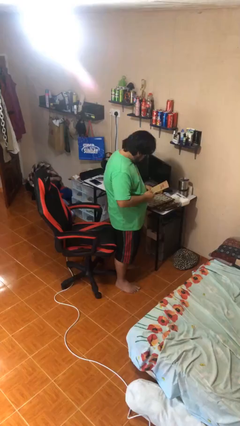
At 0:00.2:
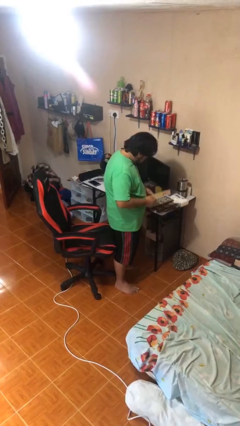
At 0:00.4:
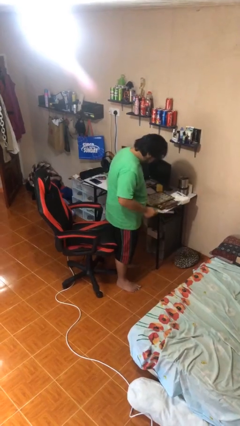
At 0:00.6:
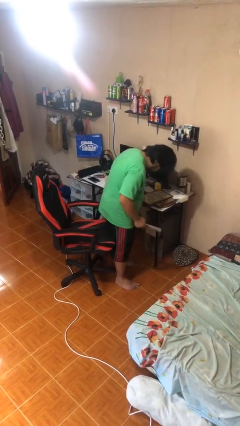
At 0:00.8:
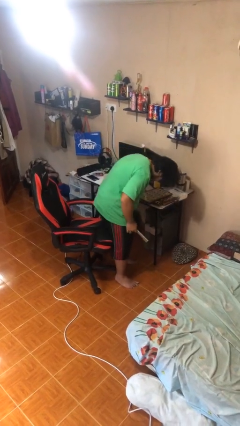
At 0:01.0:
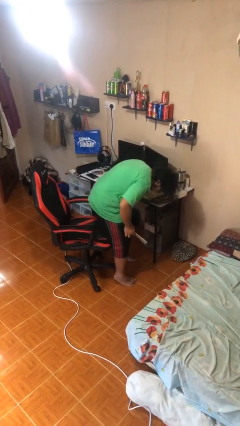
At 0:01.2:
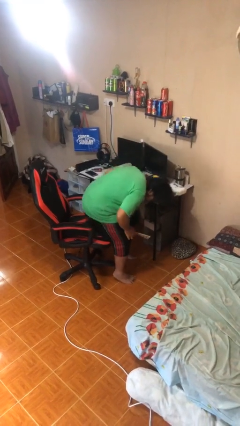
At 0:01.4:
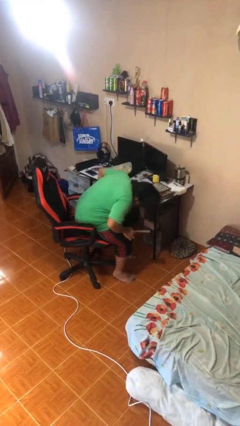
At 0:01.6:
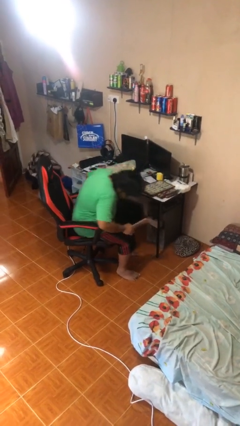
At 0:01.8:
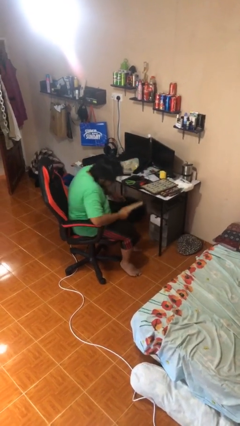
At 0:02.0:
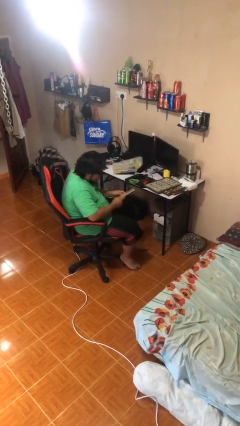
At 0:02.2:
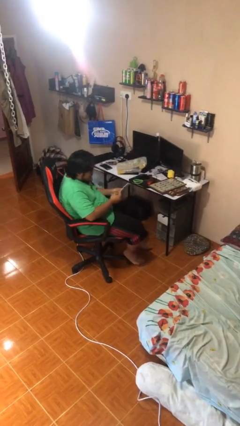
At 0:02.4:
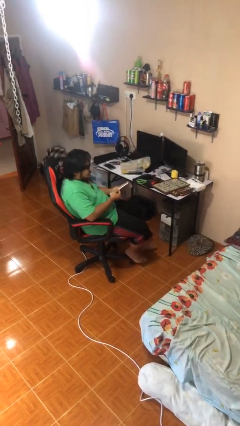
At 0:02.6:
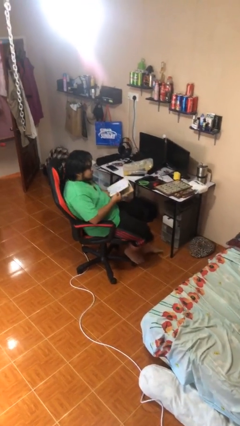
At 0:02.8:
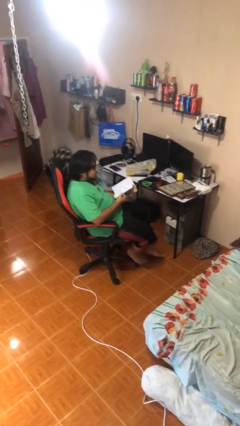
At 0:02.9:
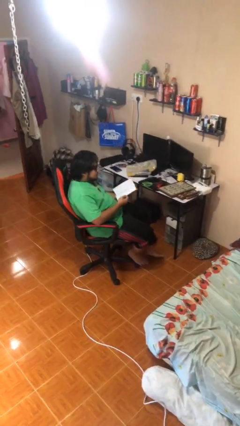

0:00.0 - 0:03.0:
person sits down

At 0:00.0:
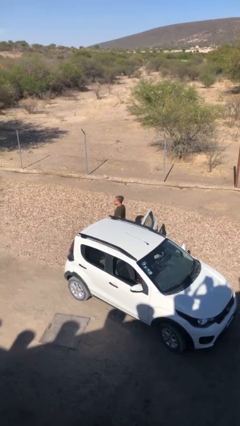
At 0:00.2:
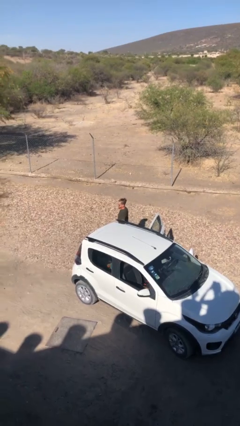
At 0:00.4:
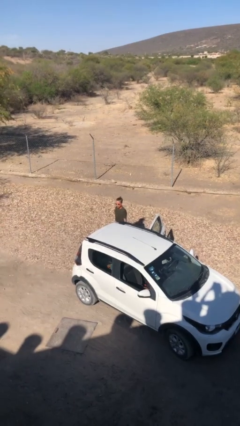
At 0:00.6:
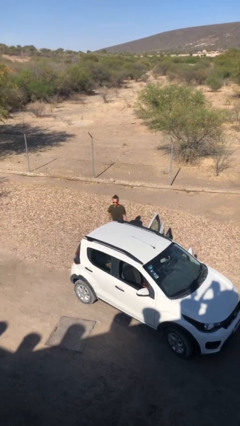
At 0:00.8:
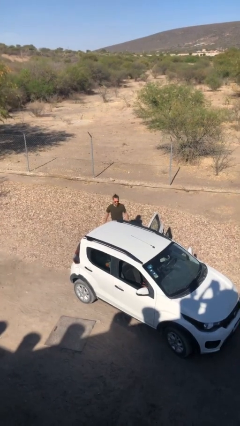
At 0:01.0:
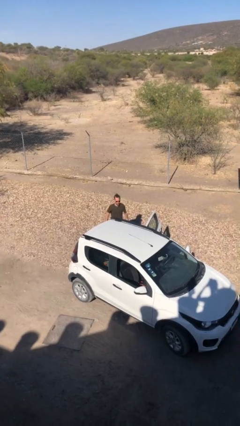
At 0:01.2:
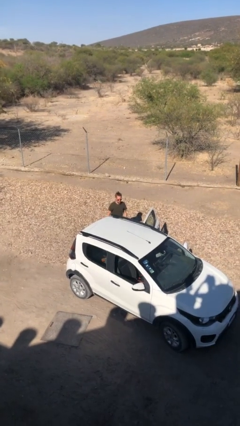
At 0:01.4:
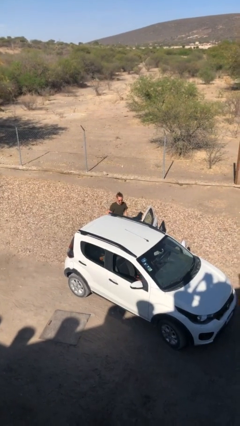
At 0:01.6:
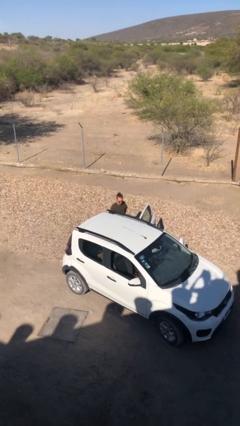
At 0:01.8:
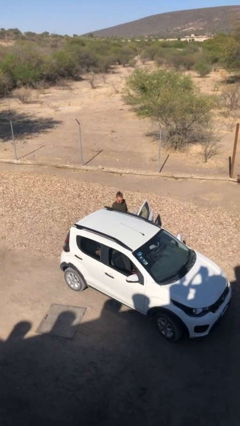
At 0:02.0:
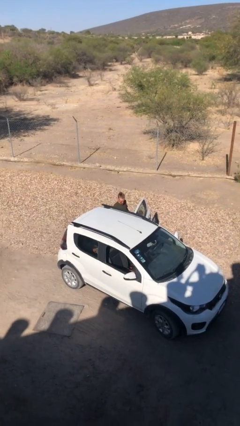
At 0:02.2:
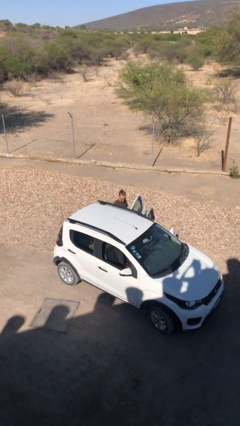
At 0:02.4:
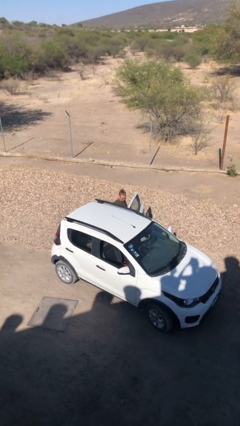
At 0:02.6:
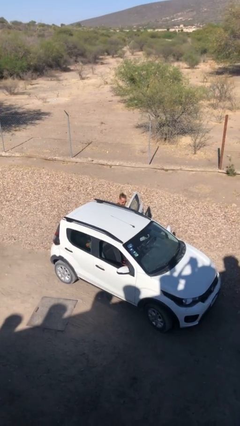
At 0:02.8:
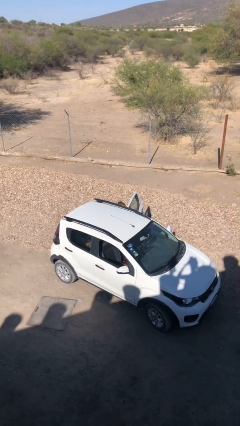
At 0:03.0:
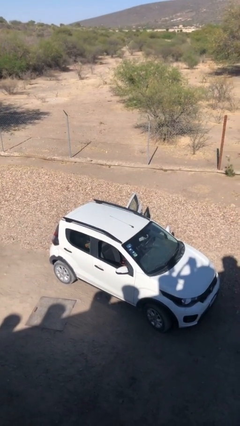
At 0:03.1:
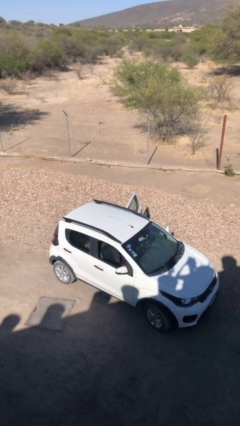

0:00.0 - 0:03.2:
person enters car

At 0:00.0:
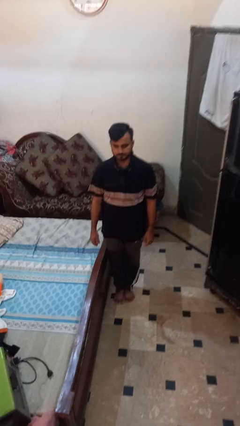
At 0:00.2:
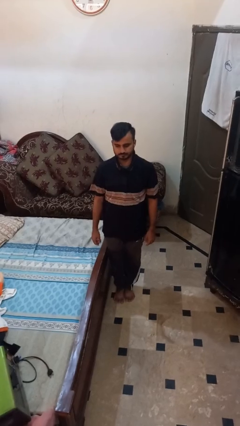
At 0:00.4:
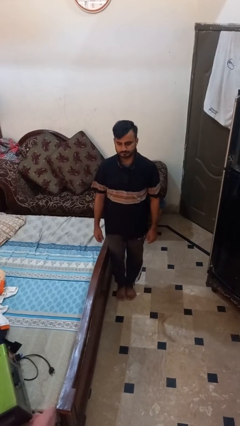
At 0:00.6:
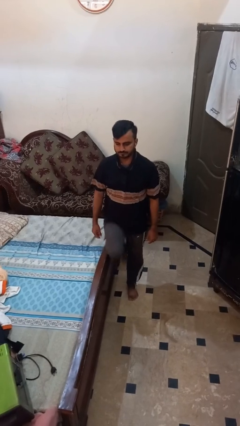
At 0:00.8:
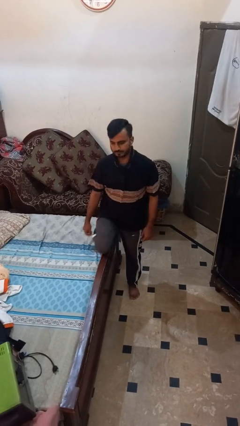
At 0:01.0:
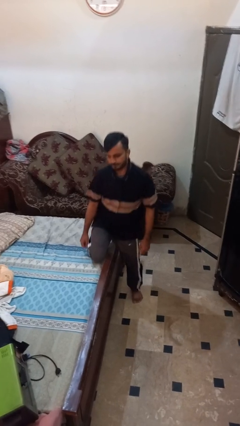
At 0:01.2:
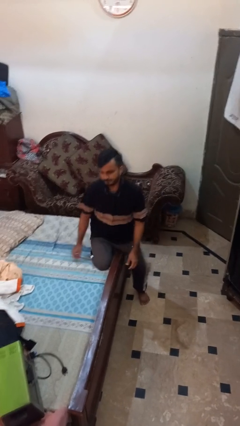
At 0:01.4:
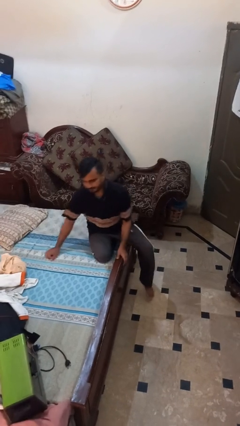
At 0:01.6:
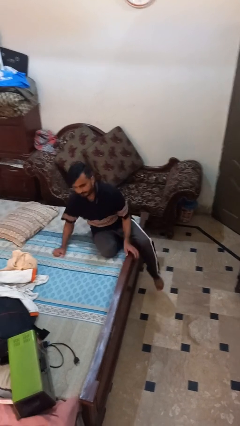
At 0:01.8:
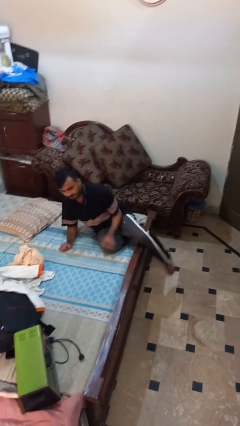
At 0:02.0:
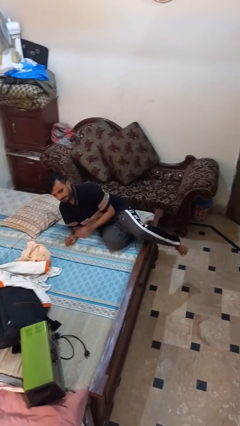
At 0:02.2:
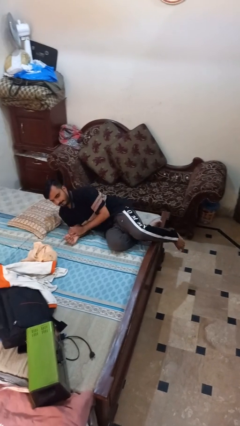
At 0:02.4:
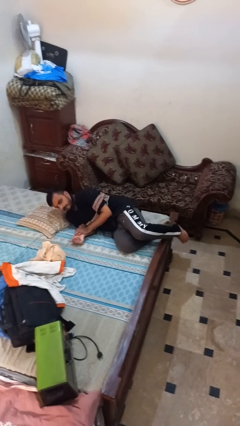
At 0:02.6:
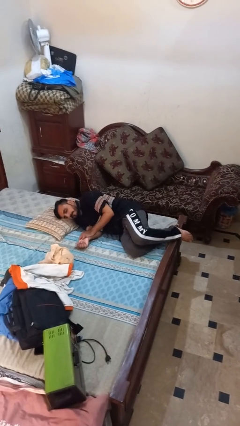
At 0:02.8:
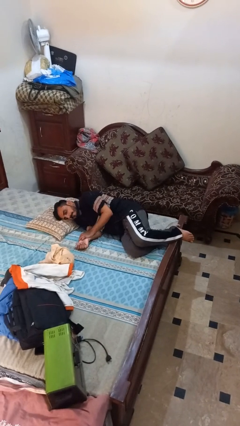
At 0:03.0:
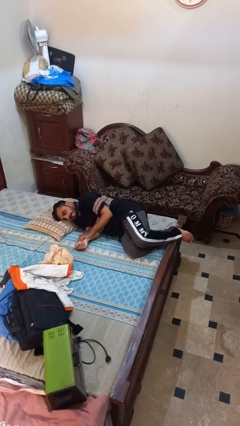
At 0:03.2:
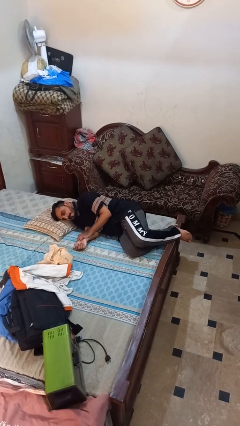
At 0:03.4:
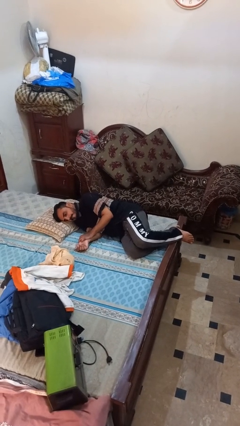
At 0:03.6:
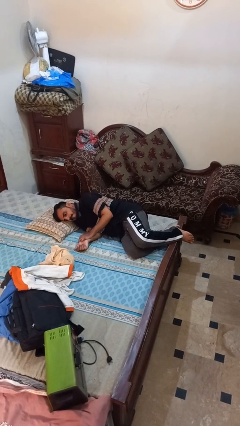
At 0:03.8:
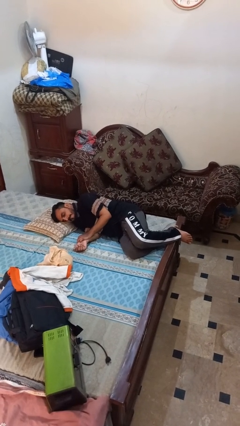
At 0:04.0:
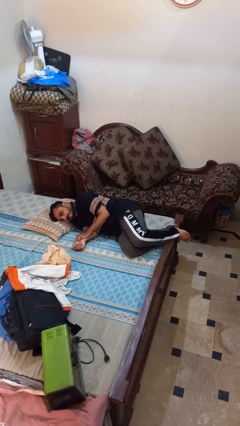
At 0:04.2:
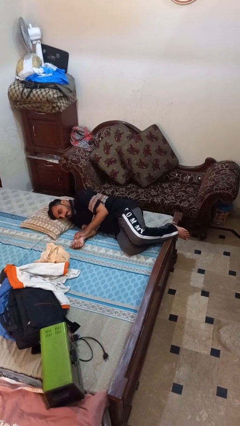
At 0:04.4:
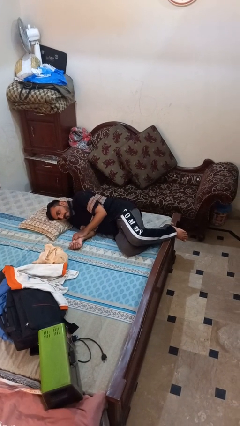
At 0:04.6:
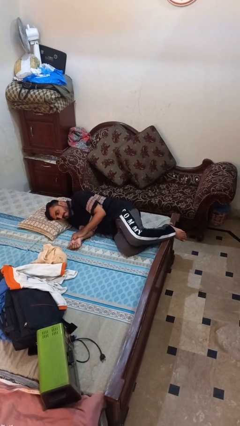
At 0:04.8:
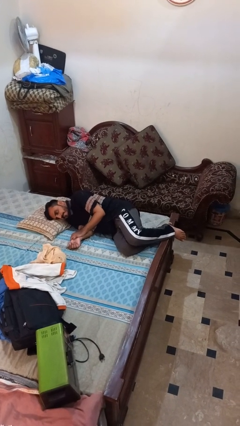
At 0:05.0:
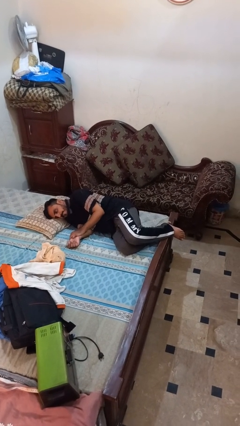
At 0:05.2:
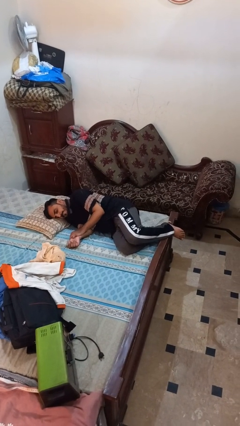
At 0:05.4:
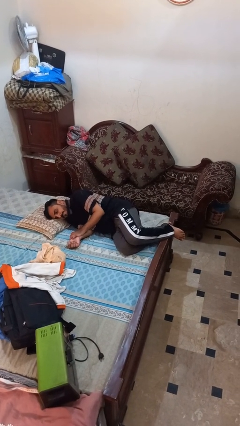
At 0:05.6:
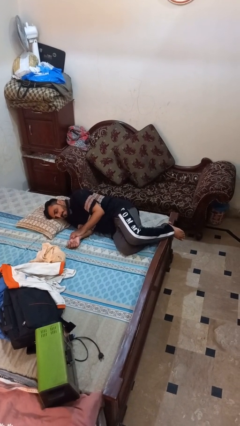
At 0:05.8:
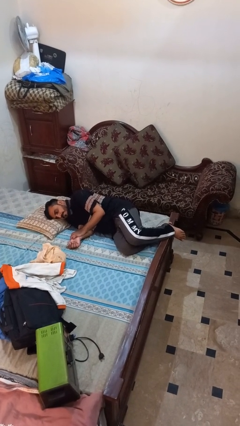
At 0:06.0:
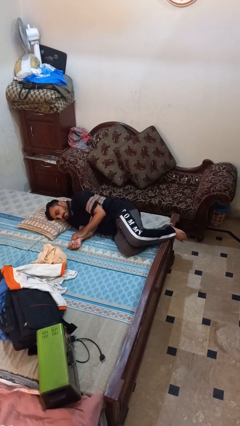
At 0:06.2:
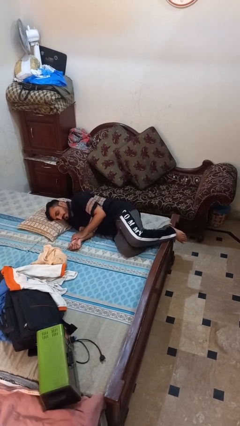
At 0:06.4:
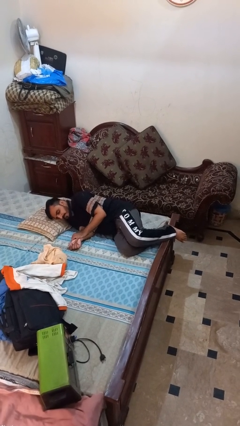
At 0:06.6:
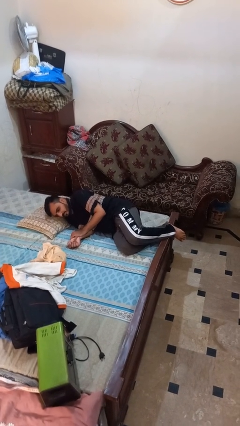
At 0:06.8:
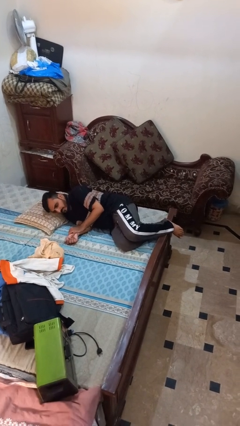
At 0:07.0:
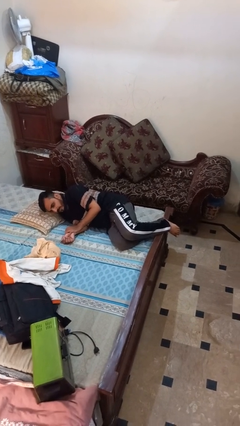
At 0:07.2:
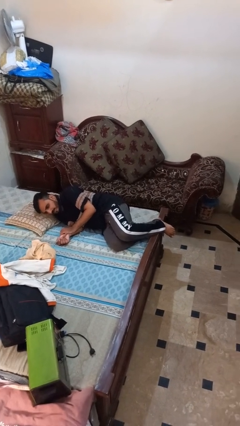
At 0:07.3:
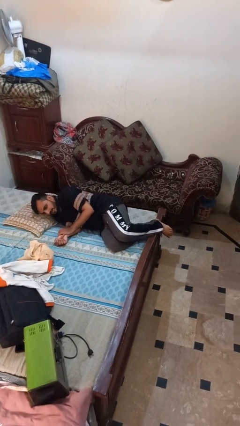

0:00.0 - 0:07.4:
person lies down on bed

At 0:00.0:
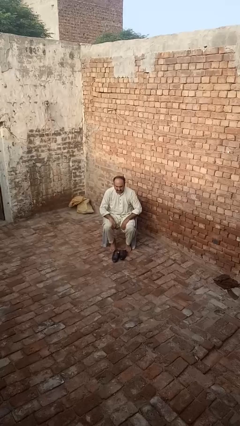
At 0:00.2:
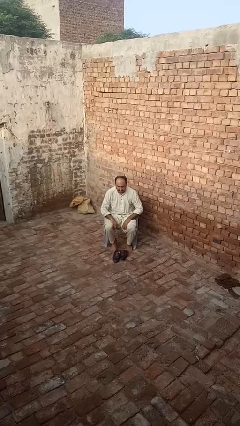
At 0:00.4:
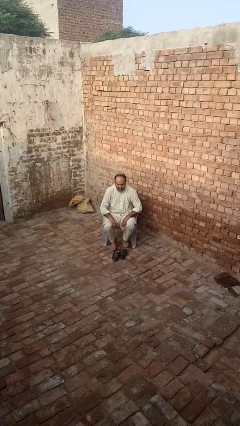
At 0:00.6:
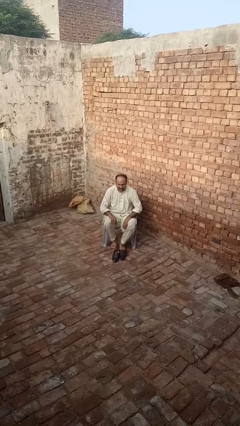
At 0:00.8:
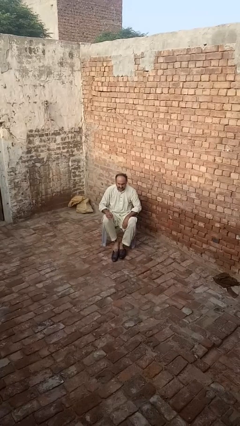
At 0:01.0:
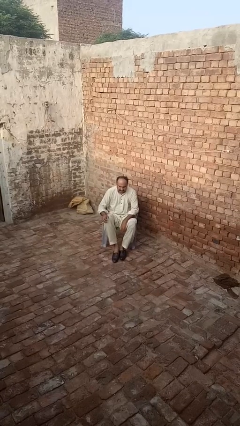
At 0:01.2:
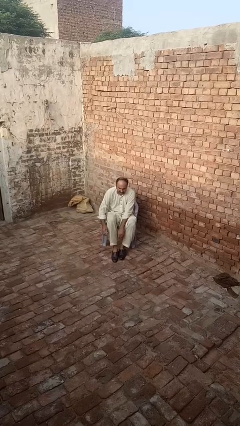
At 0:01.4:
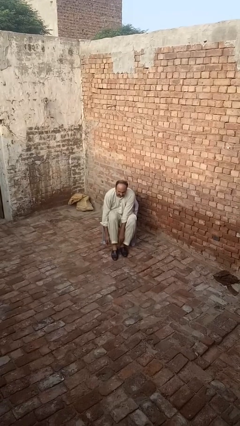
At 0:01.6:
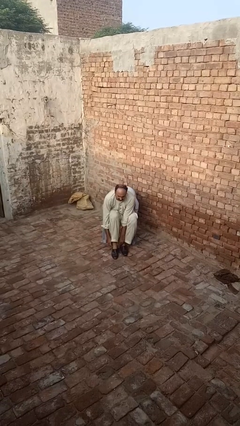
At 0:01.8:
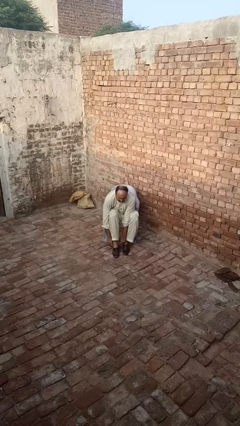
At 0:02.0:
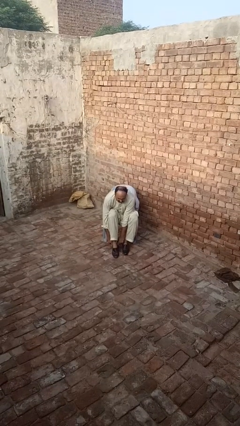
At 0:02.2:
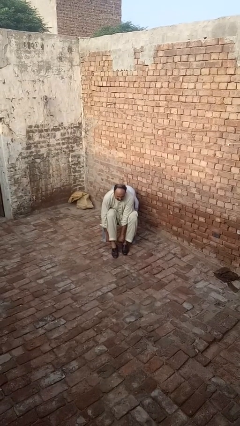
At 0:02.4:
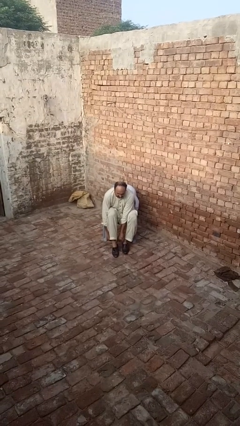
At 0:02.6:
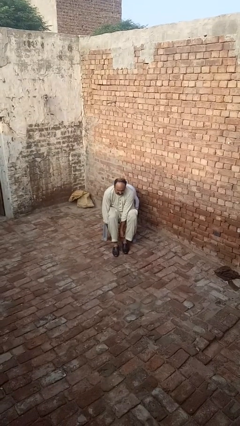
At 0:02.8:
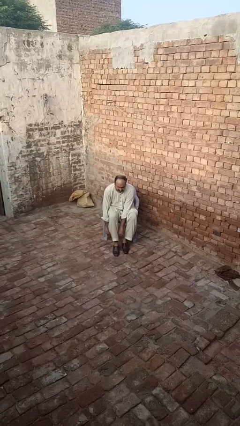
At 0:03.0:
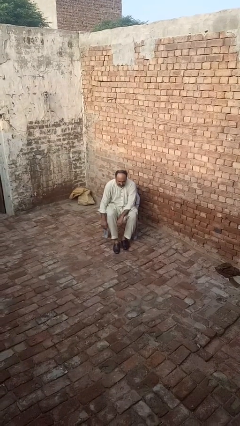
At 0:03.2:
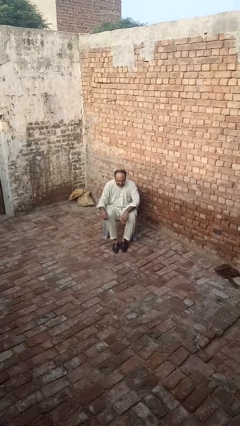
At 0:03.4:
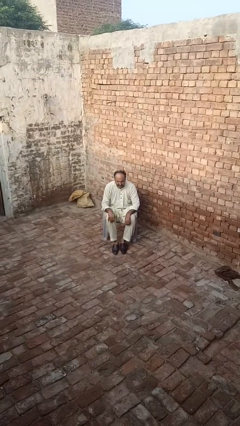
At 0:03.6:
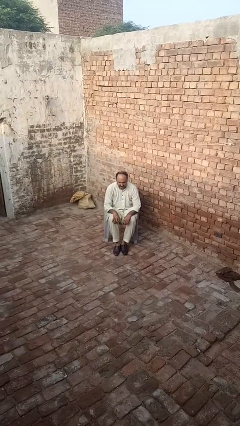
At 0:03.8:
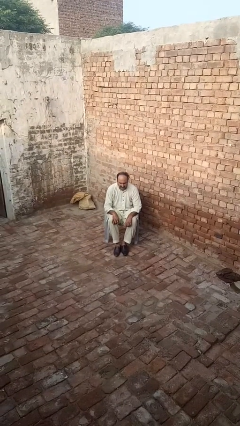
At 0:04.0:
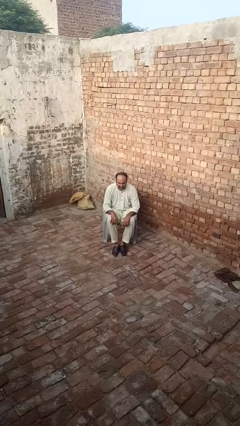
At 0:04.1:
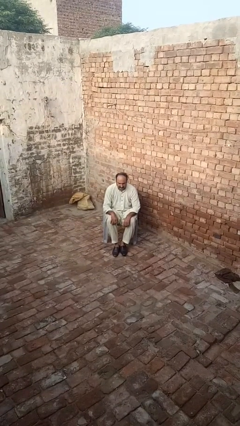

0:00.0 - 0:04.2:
person puts on shoes
